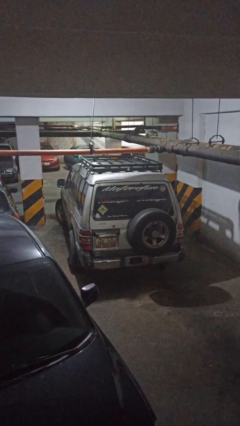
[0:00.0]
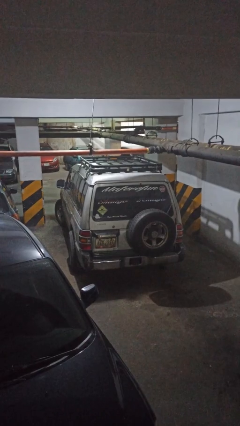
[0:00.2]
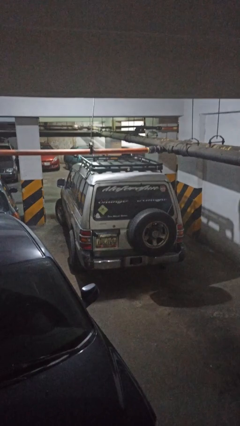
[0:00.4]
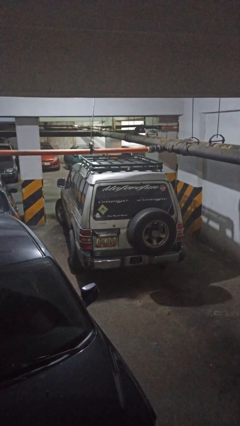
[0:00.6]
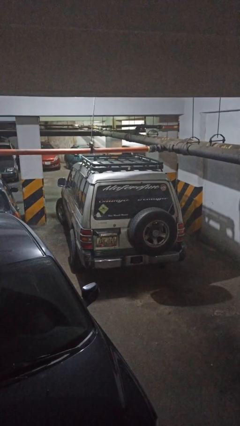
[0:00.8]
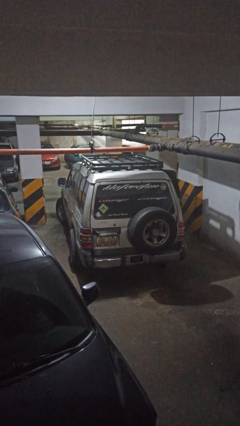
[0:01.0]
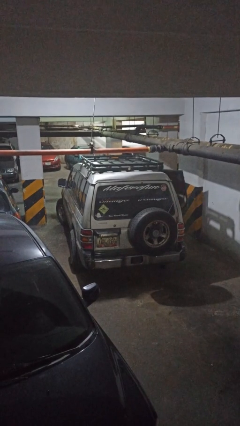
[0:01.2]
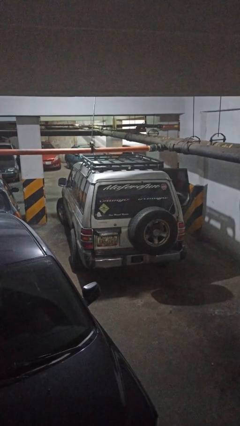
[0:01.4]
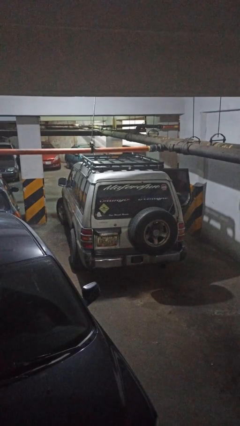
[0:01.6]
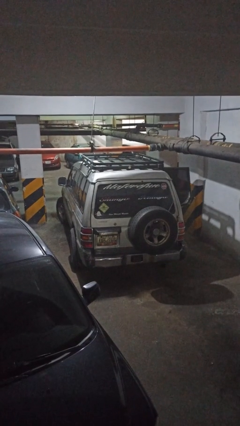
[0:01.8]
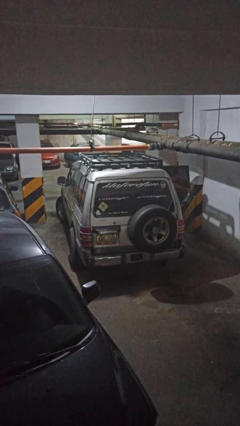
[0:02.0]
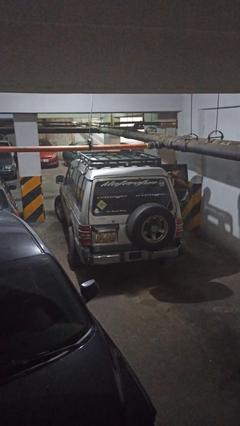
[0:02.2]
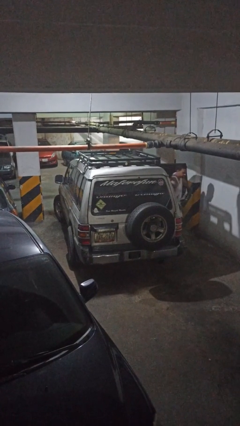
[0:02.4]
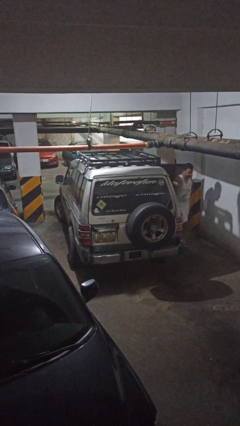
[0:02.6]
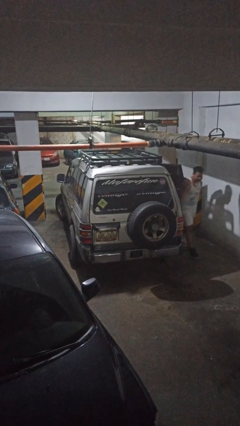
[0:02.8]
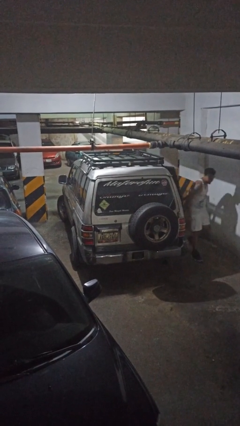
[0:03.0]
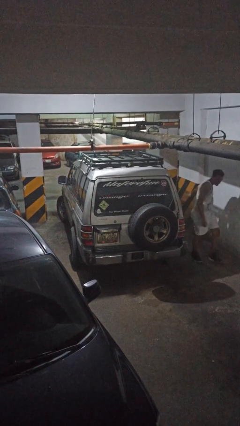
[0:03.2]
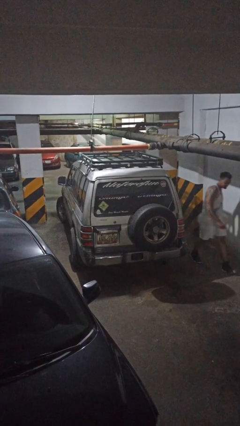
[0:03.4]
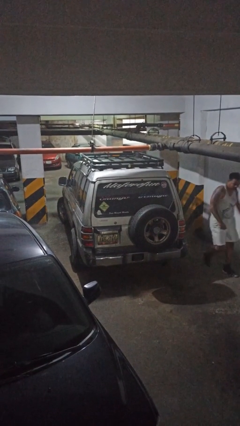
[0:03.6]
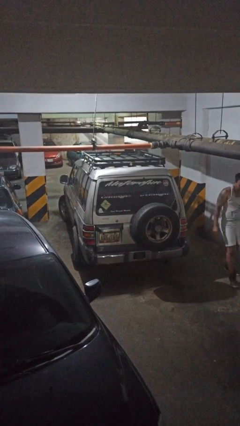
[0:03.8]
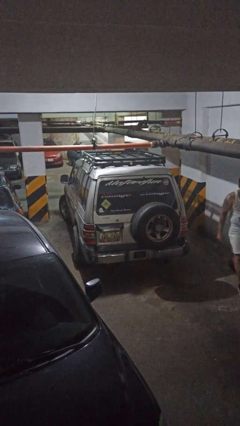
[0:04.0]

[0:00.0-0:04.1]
car drops off person

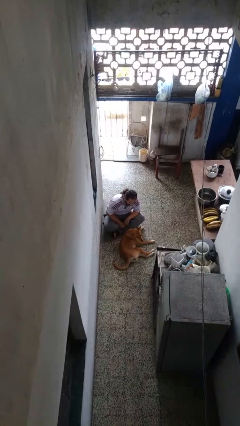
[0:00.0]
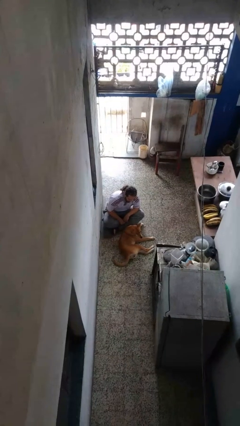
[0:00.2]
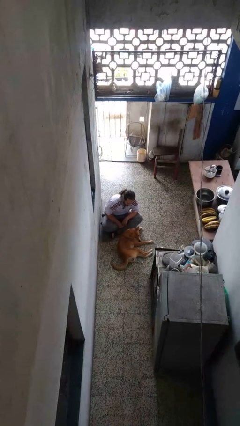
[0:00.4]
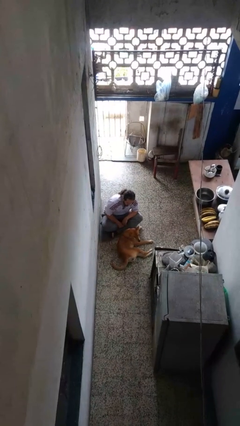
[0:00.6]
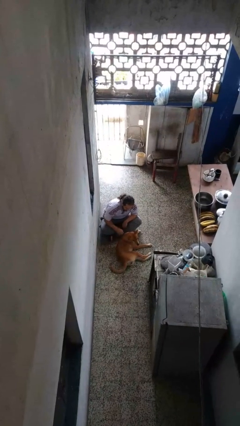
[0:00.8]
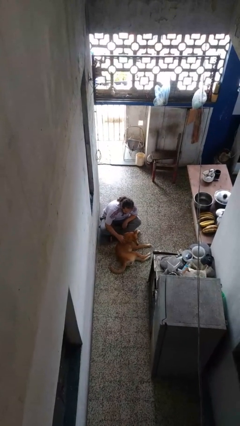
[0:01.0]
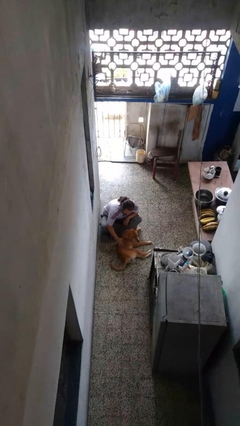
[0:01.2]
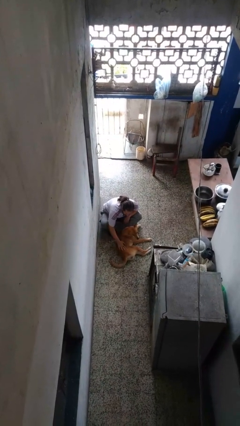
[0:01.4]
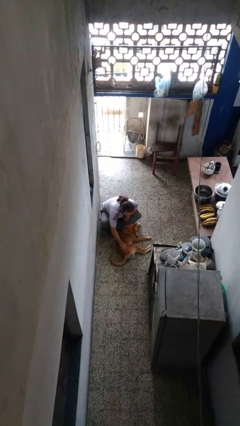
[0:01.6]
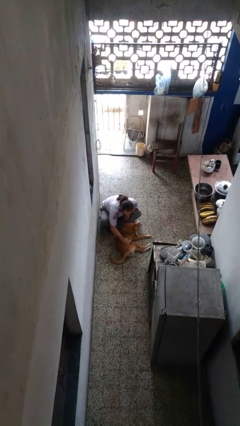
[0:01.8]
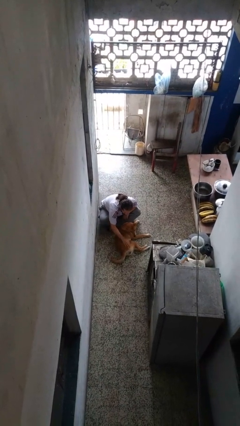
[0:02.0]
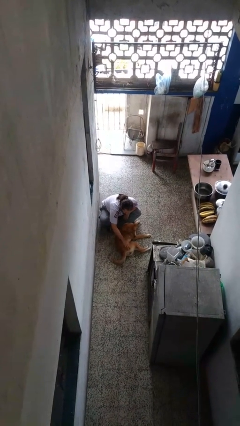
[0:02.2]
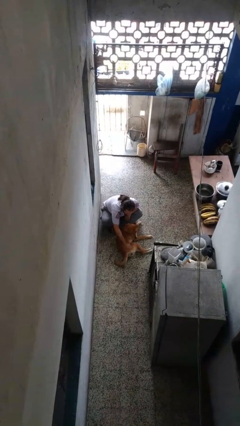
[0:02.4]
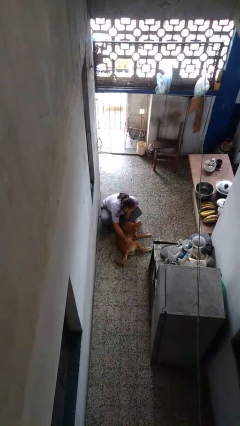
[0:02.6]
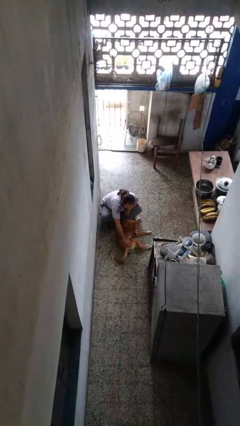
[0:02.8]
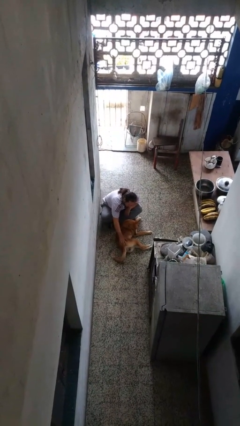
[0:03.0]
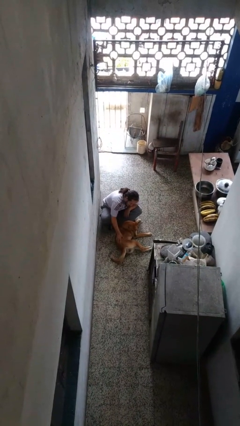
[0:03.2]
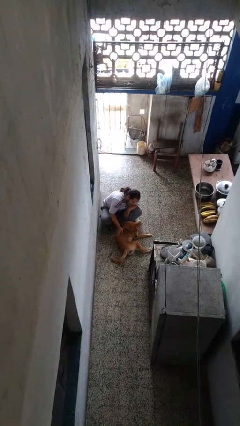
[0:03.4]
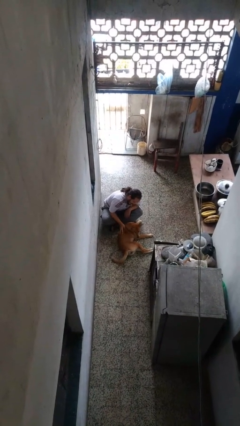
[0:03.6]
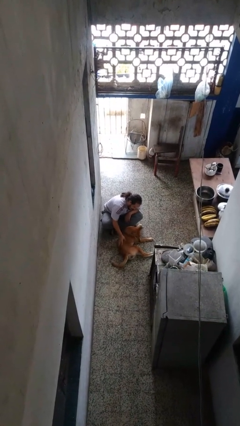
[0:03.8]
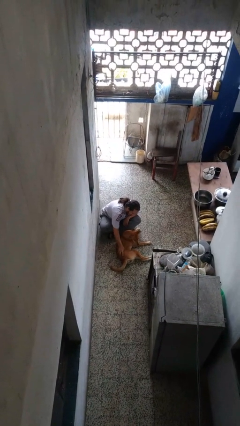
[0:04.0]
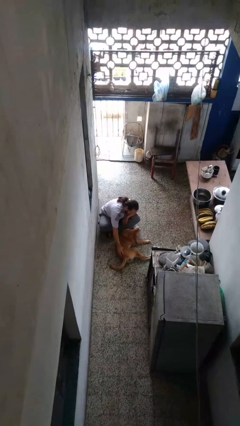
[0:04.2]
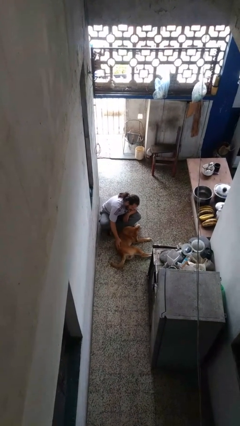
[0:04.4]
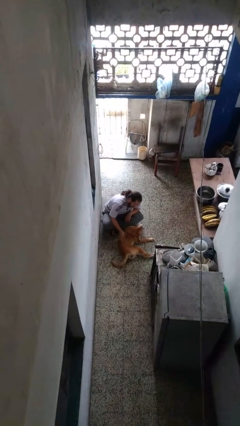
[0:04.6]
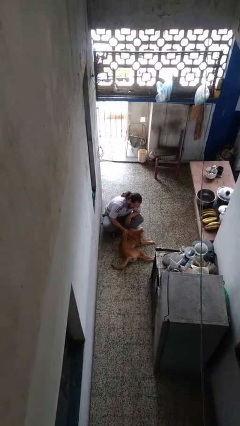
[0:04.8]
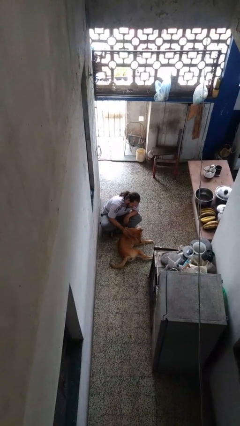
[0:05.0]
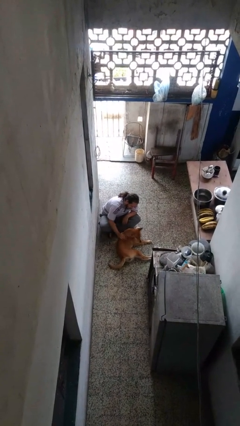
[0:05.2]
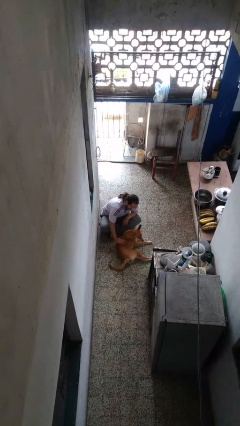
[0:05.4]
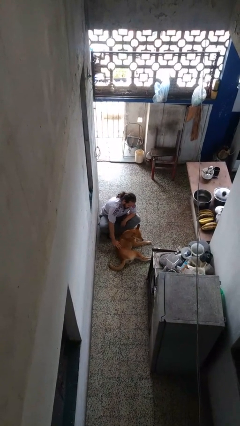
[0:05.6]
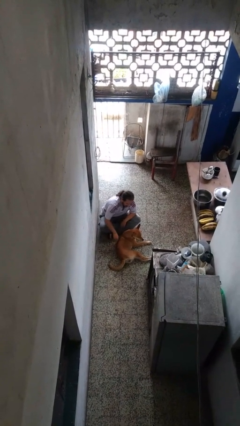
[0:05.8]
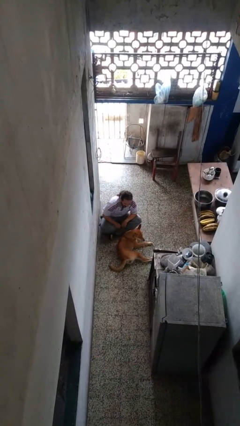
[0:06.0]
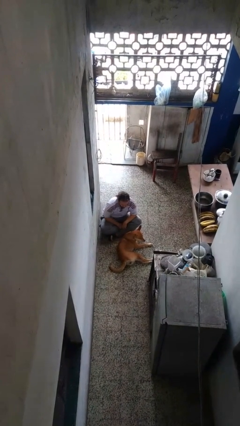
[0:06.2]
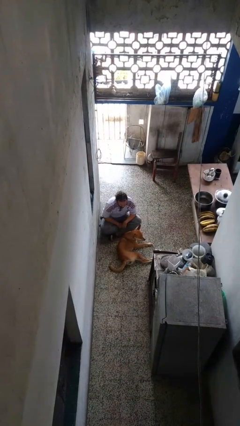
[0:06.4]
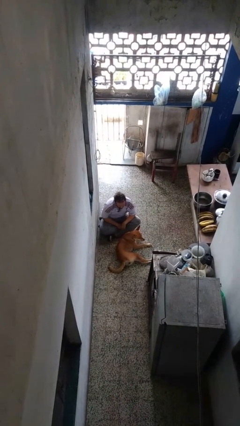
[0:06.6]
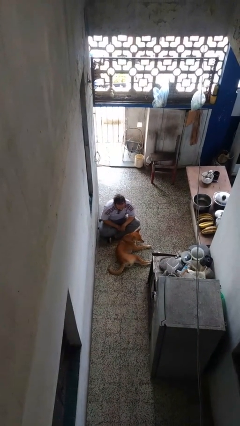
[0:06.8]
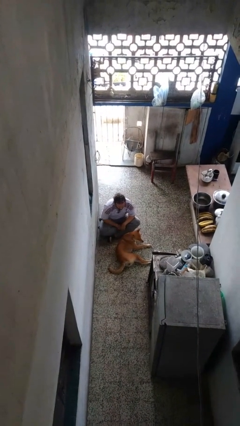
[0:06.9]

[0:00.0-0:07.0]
person pets dog

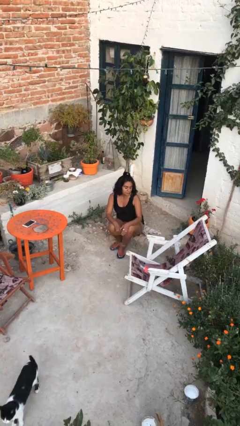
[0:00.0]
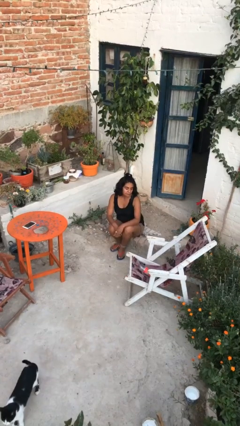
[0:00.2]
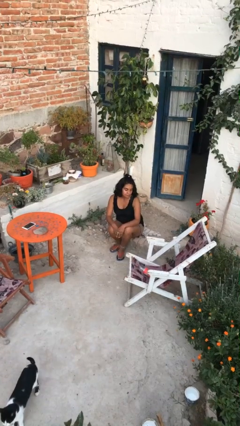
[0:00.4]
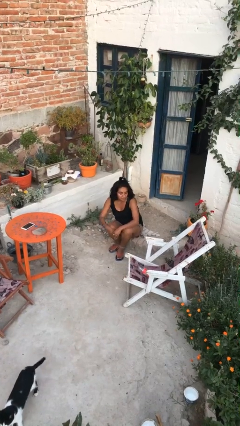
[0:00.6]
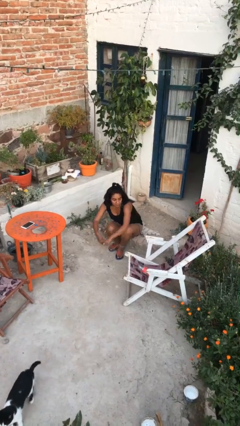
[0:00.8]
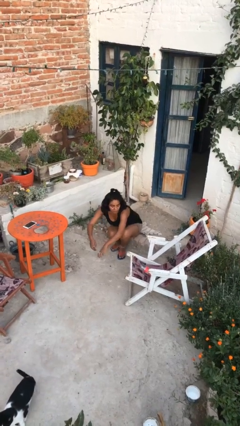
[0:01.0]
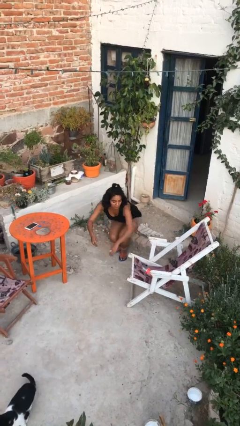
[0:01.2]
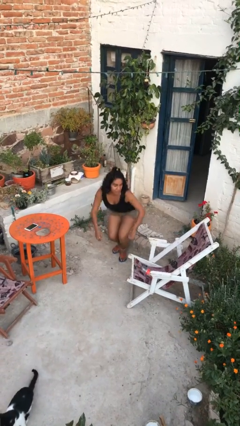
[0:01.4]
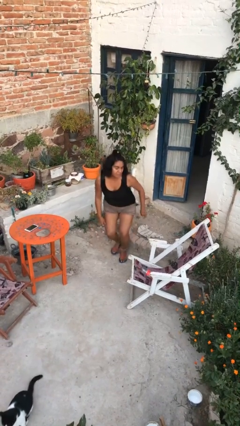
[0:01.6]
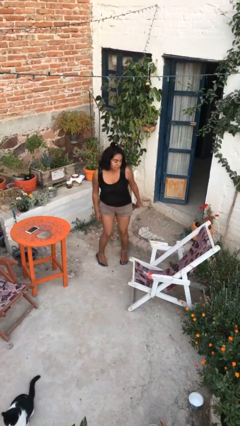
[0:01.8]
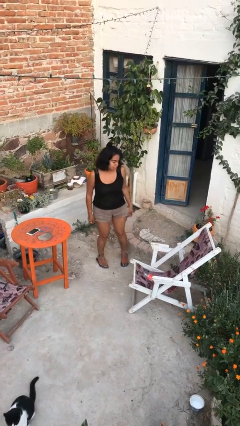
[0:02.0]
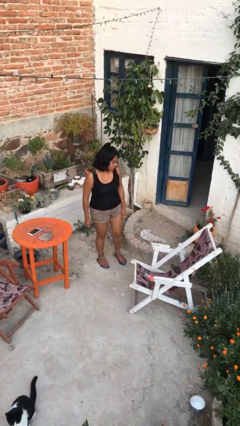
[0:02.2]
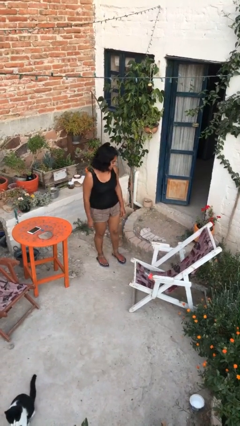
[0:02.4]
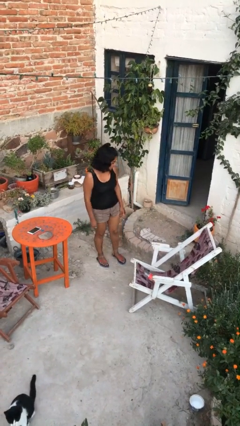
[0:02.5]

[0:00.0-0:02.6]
person stands up

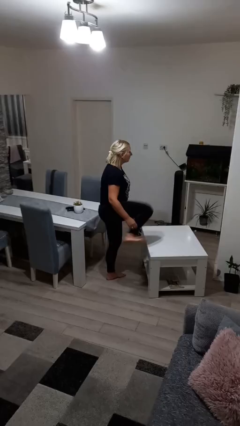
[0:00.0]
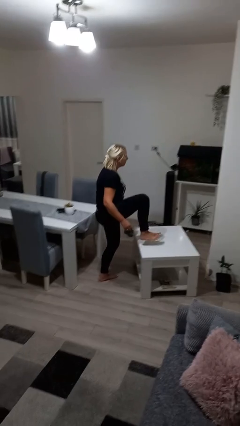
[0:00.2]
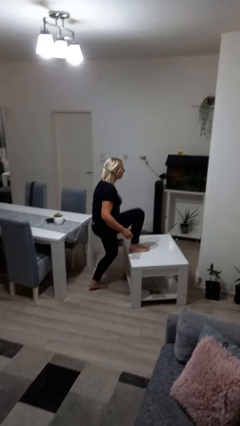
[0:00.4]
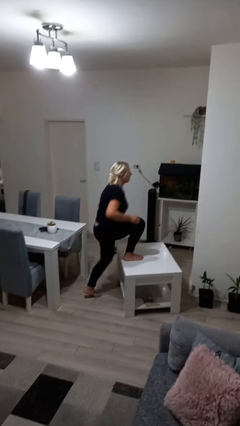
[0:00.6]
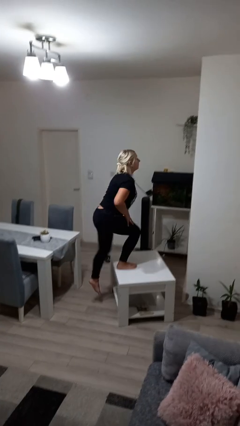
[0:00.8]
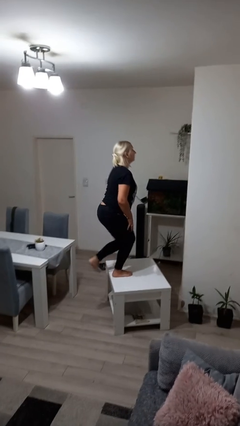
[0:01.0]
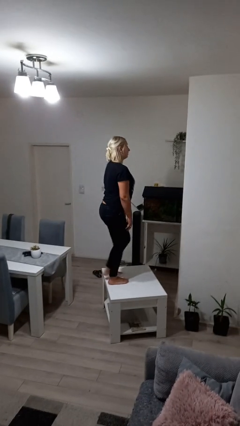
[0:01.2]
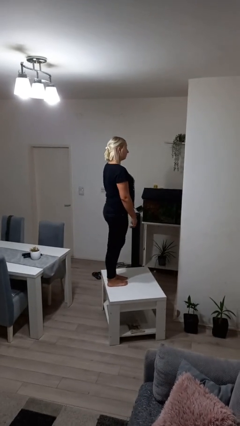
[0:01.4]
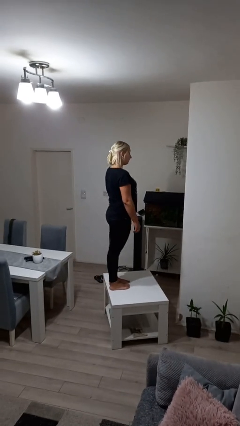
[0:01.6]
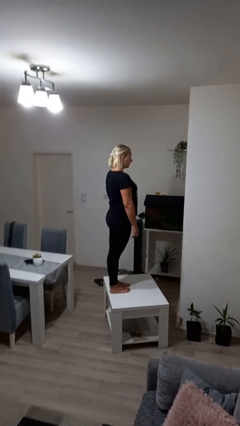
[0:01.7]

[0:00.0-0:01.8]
person climbs on table

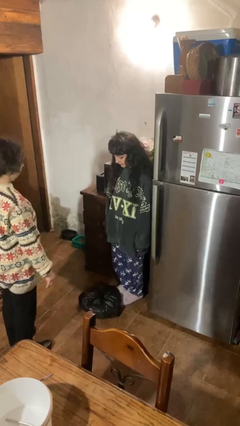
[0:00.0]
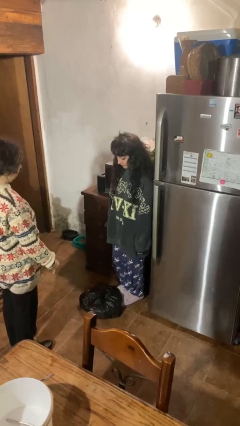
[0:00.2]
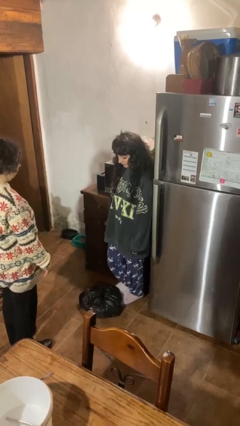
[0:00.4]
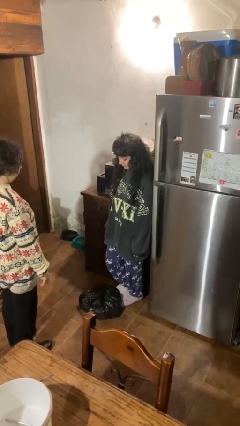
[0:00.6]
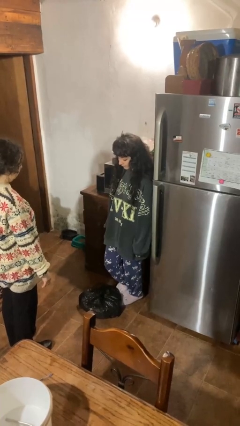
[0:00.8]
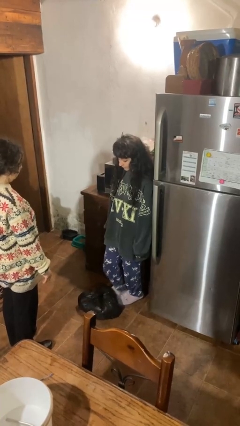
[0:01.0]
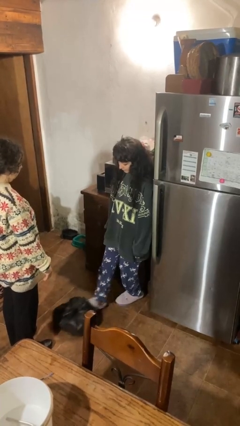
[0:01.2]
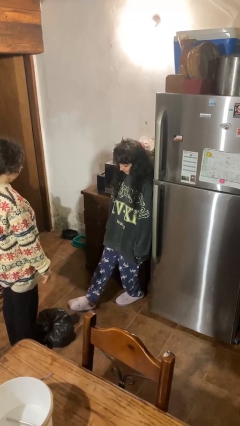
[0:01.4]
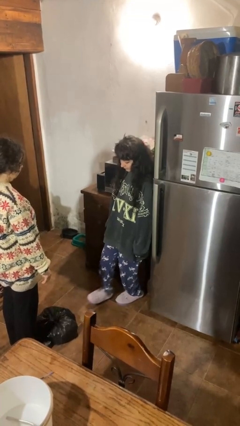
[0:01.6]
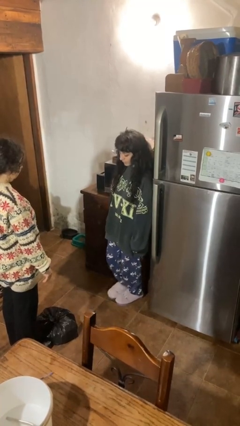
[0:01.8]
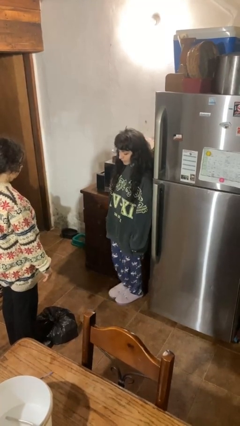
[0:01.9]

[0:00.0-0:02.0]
person kicks object to person

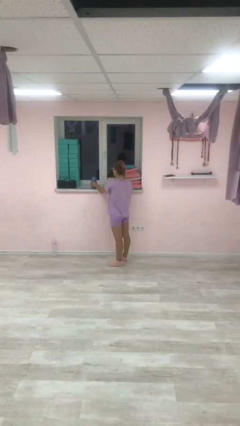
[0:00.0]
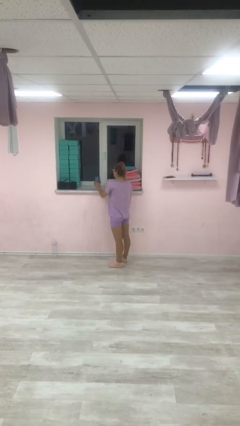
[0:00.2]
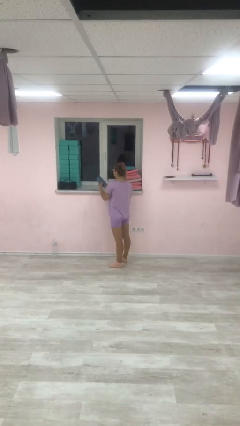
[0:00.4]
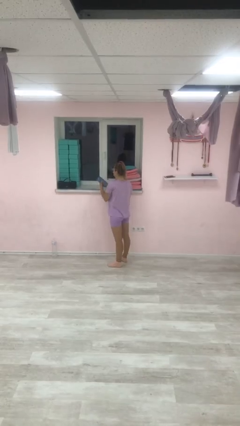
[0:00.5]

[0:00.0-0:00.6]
person picks up object from countertop
